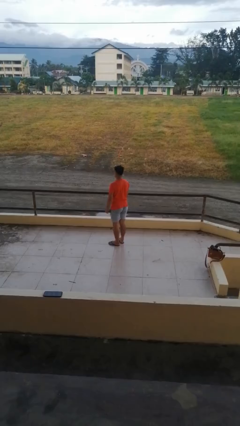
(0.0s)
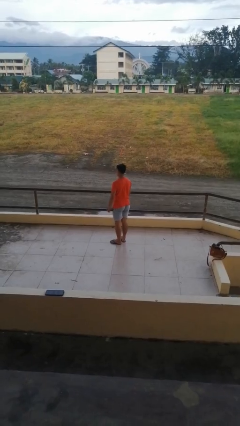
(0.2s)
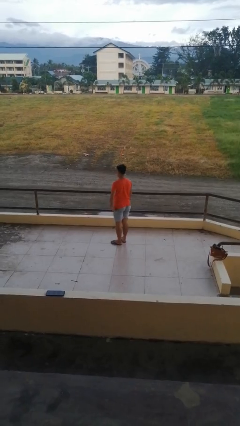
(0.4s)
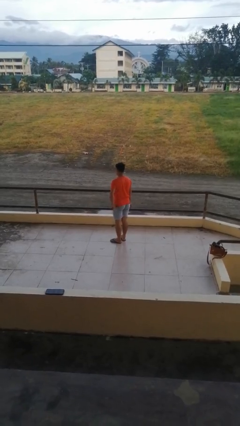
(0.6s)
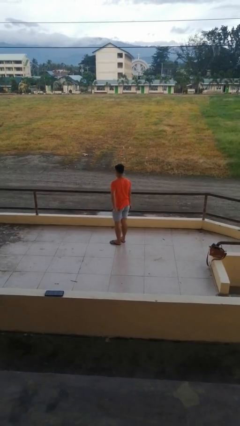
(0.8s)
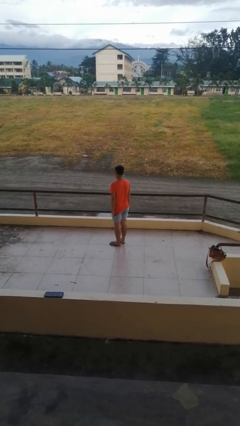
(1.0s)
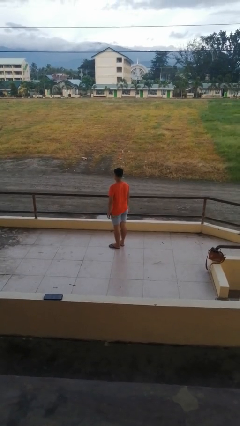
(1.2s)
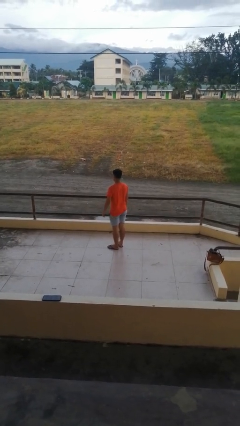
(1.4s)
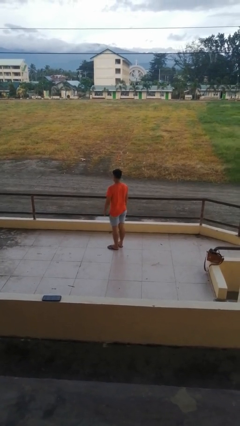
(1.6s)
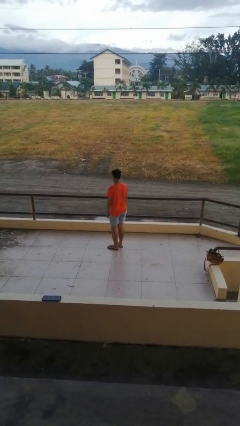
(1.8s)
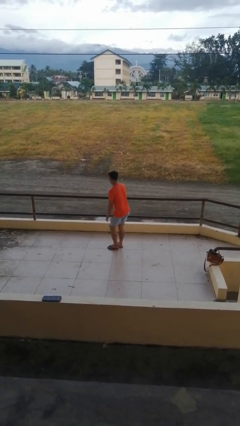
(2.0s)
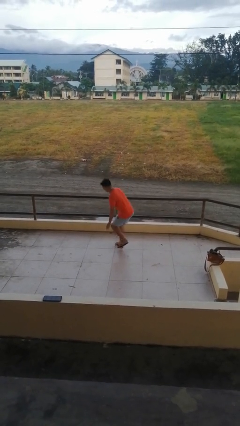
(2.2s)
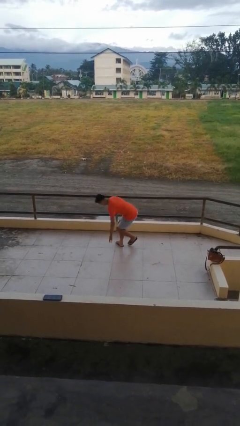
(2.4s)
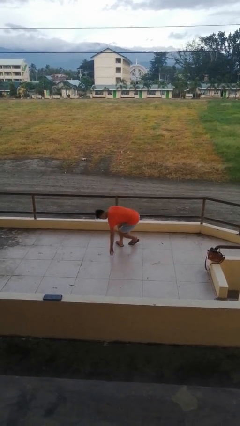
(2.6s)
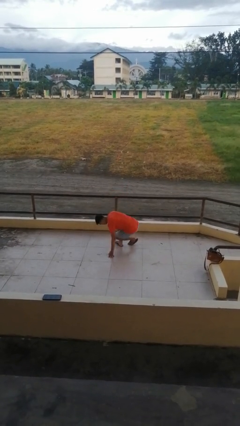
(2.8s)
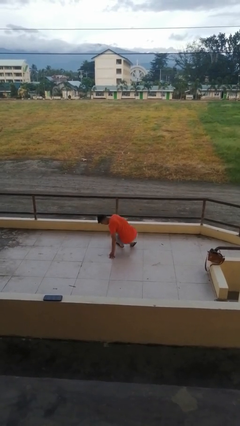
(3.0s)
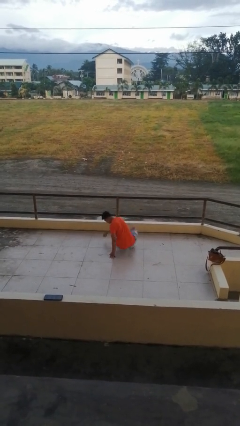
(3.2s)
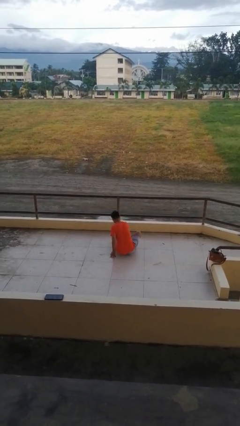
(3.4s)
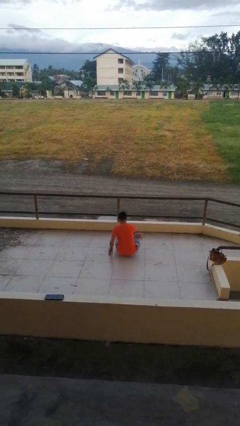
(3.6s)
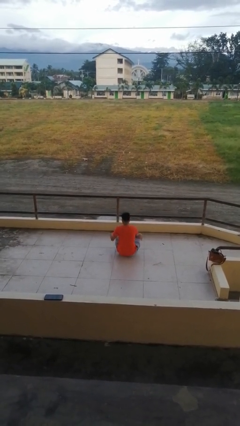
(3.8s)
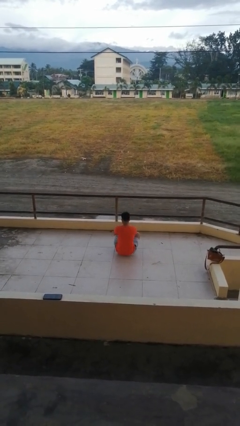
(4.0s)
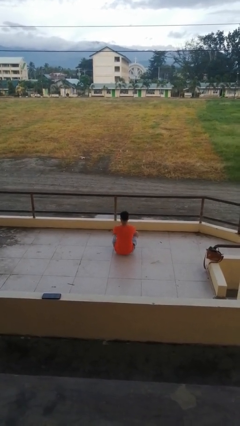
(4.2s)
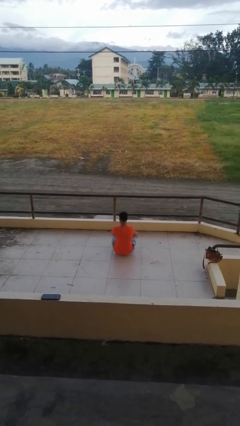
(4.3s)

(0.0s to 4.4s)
person sits crisscross

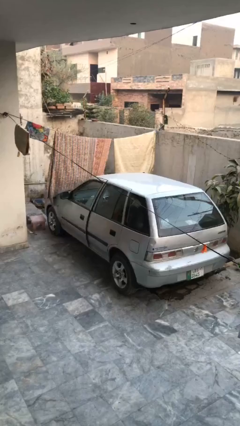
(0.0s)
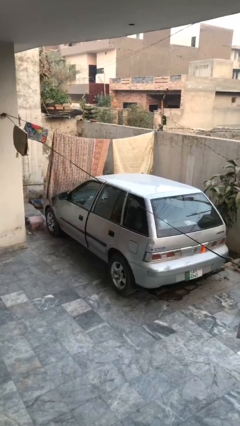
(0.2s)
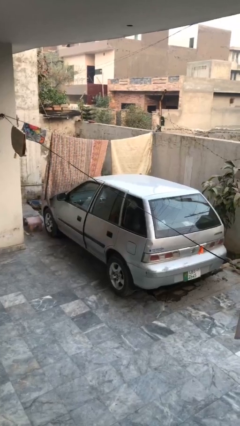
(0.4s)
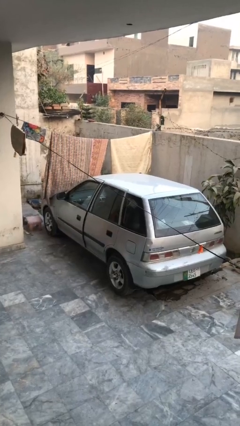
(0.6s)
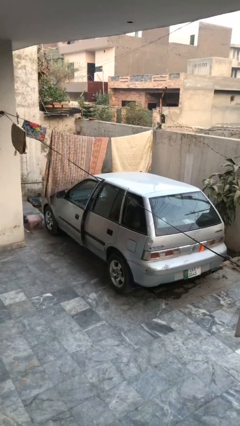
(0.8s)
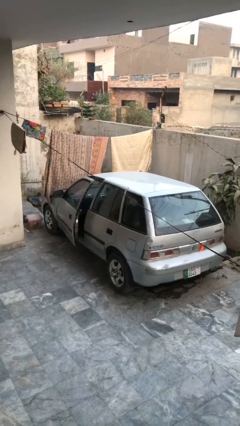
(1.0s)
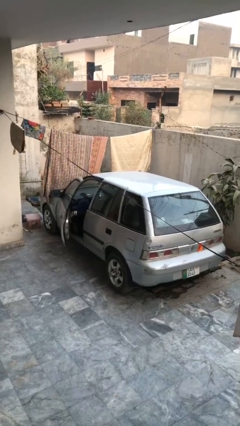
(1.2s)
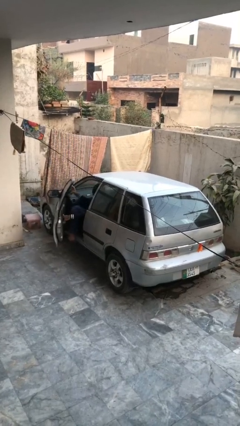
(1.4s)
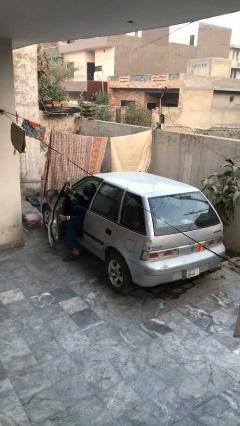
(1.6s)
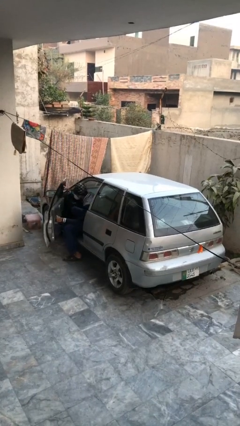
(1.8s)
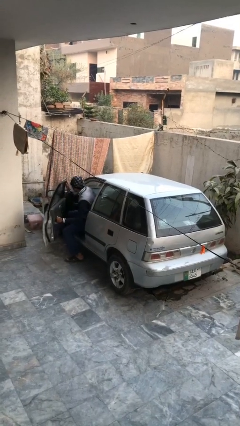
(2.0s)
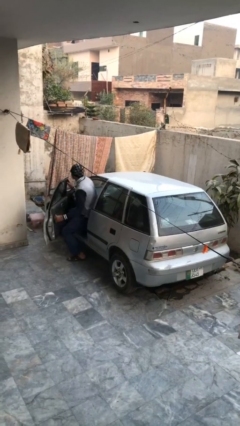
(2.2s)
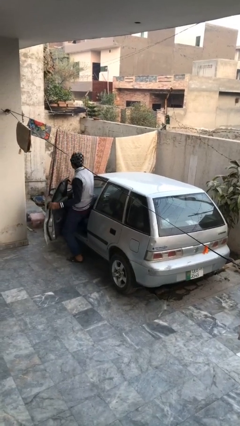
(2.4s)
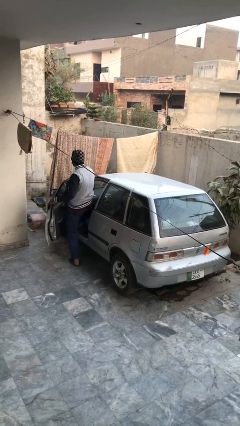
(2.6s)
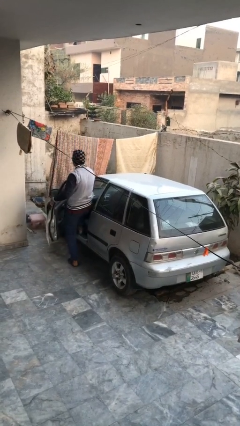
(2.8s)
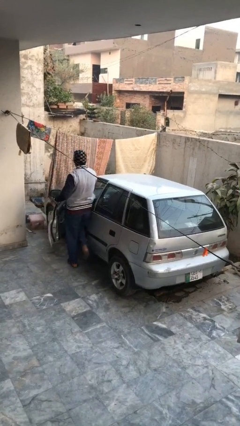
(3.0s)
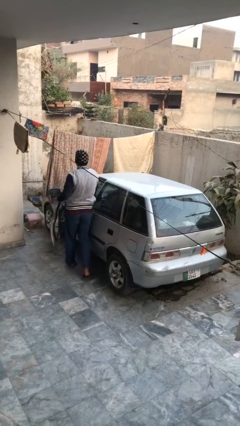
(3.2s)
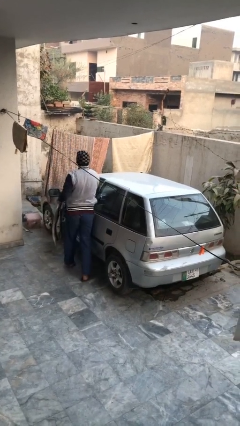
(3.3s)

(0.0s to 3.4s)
car drops off person

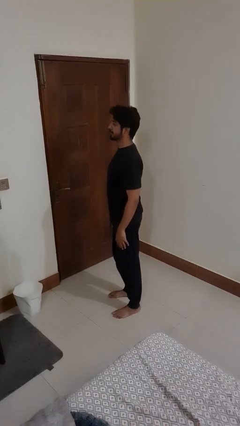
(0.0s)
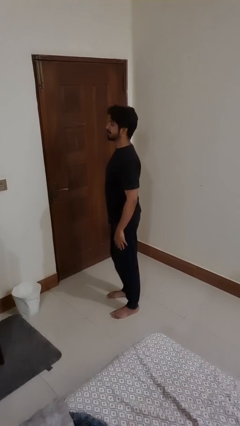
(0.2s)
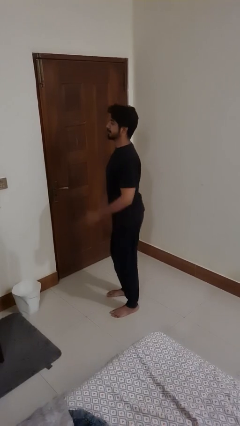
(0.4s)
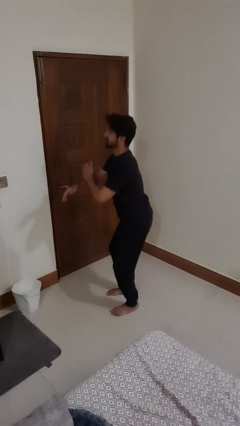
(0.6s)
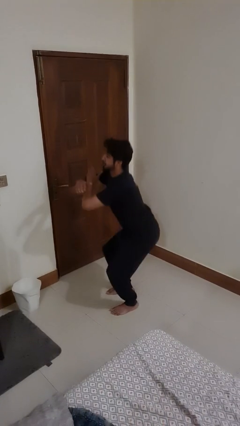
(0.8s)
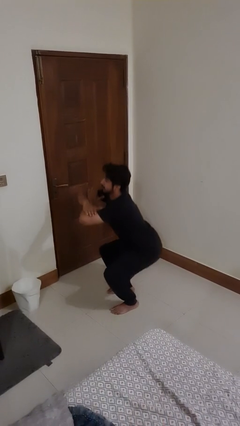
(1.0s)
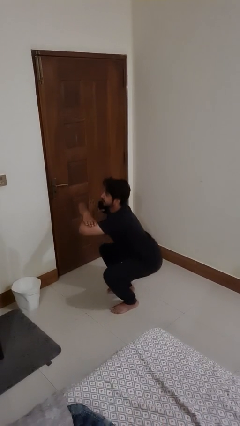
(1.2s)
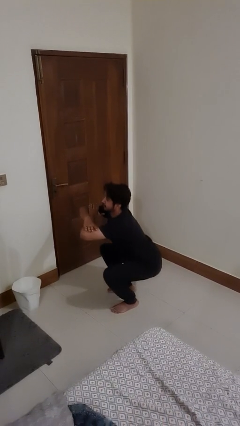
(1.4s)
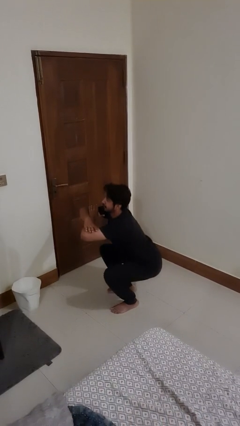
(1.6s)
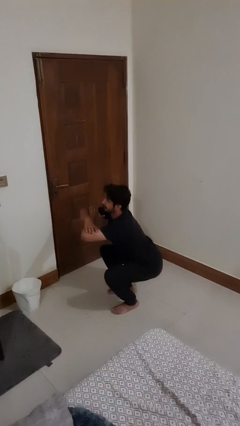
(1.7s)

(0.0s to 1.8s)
person squats

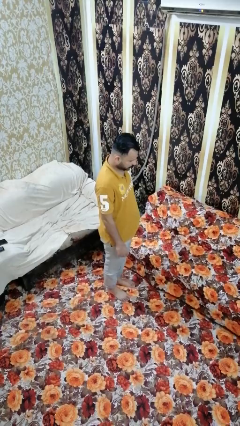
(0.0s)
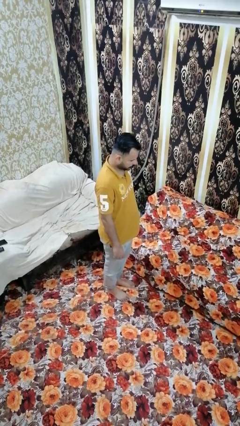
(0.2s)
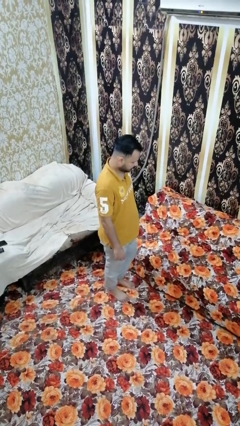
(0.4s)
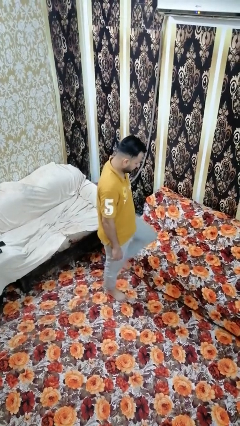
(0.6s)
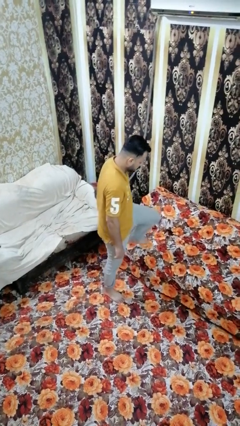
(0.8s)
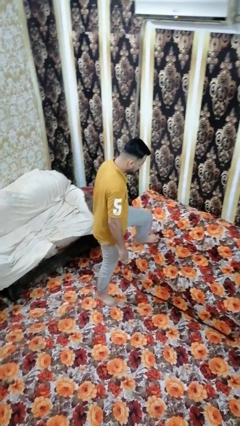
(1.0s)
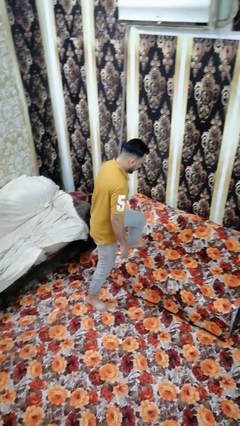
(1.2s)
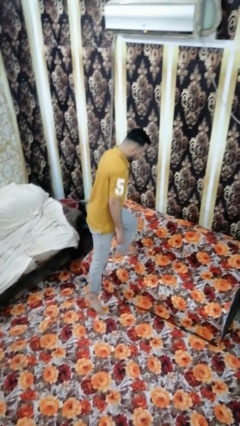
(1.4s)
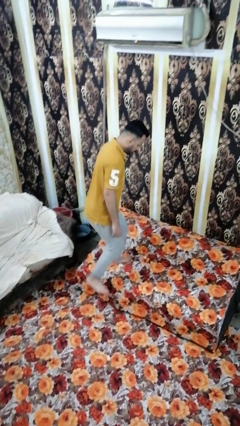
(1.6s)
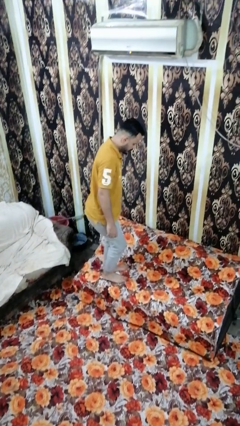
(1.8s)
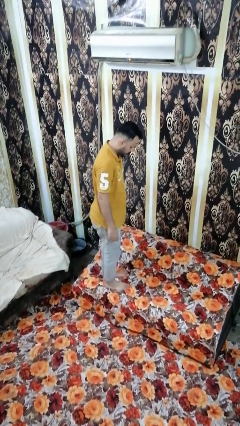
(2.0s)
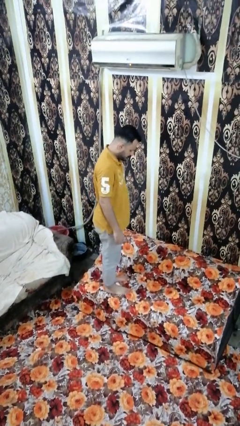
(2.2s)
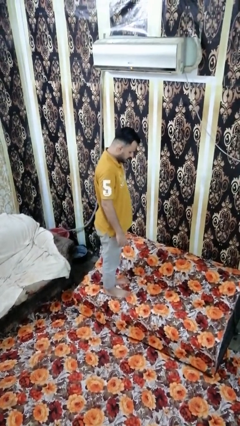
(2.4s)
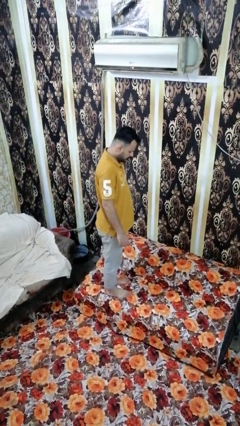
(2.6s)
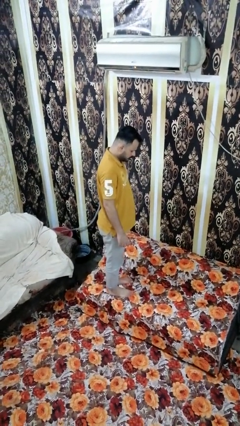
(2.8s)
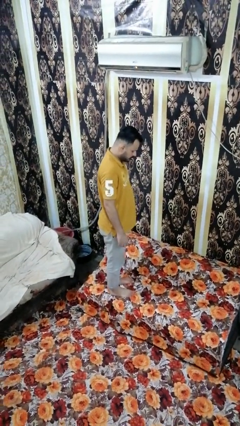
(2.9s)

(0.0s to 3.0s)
person climbs on couch

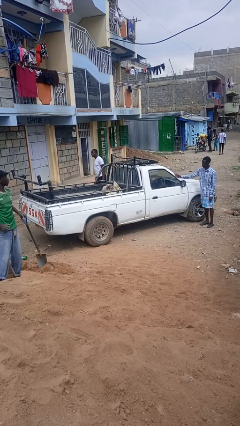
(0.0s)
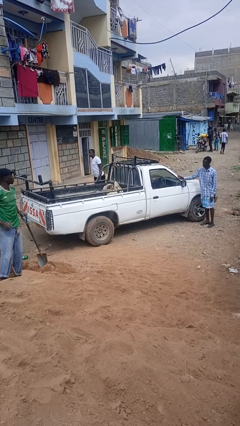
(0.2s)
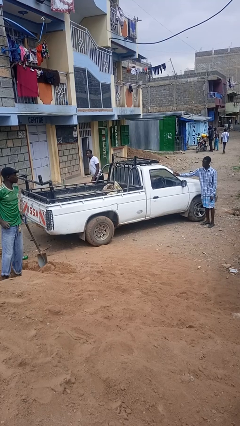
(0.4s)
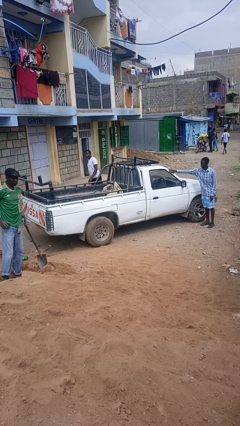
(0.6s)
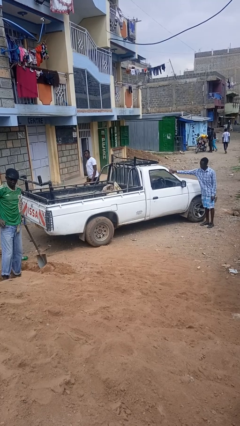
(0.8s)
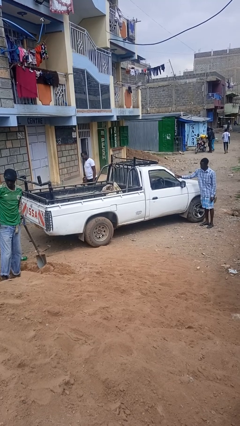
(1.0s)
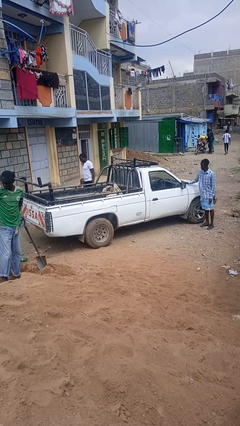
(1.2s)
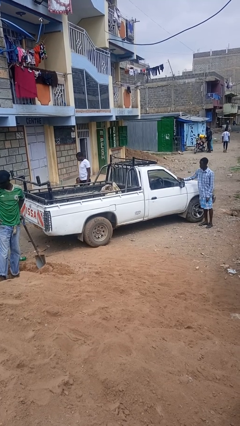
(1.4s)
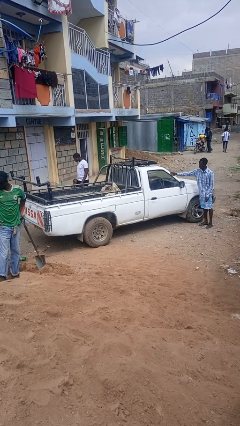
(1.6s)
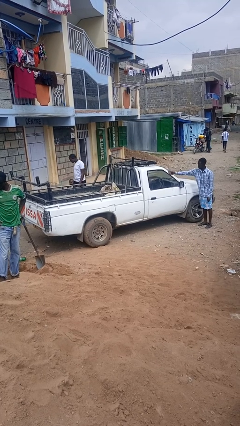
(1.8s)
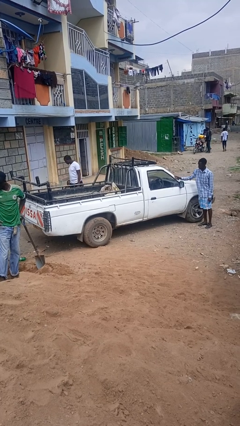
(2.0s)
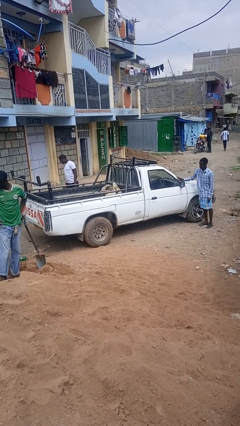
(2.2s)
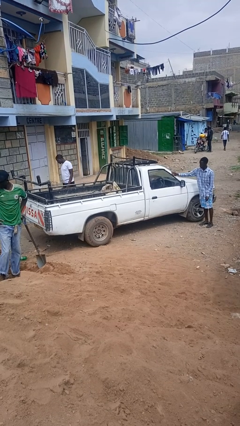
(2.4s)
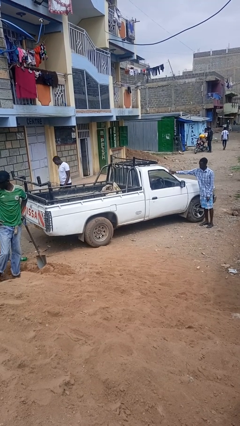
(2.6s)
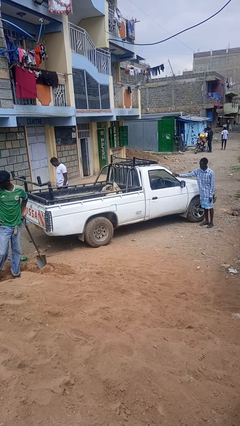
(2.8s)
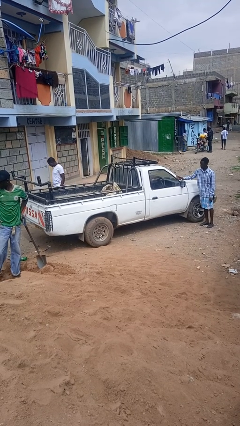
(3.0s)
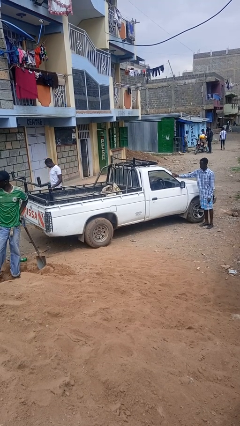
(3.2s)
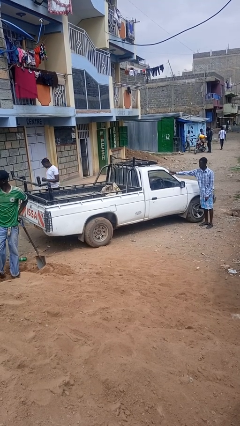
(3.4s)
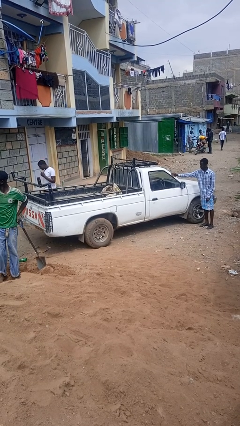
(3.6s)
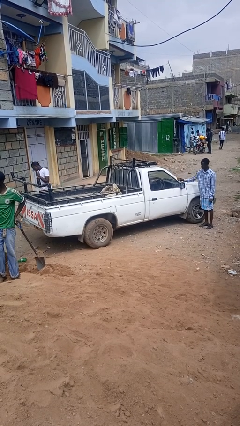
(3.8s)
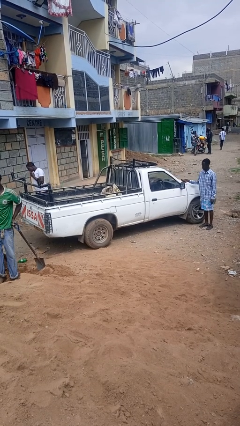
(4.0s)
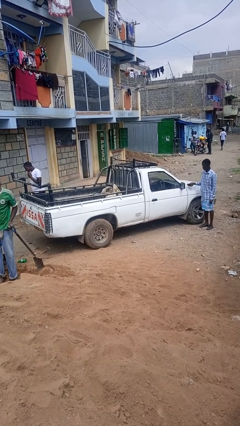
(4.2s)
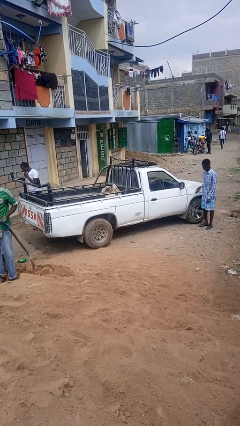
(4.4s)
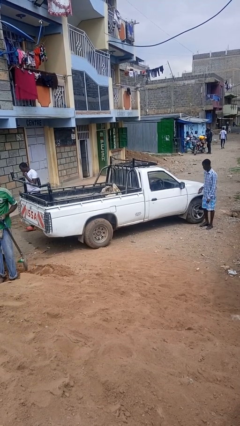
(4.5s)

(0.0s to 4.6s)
person polishes car with rag

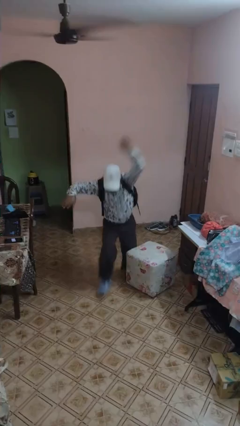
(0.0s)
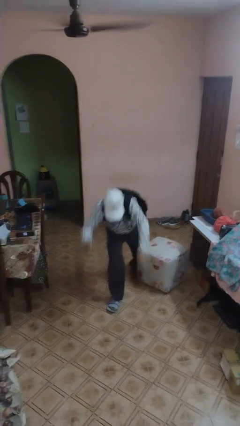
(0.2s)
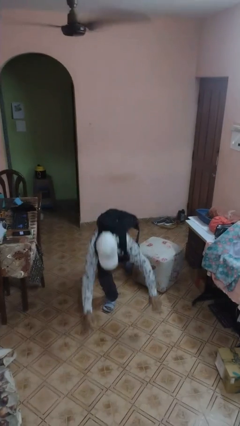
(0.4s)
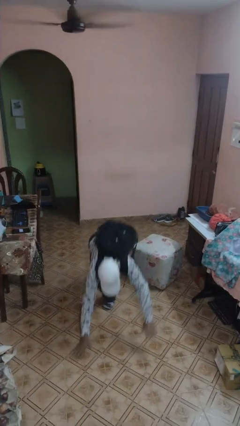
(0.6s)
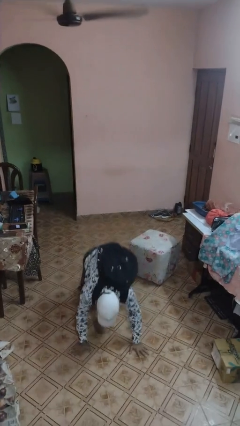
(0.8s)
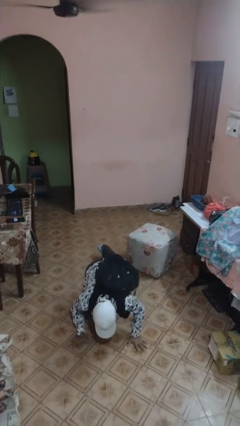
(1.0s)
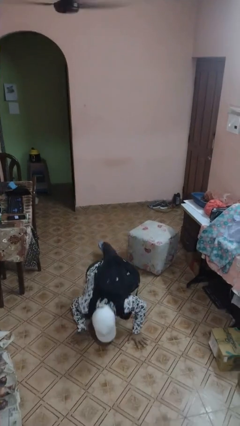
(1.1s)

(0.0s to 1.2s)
person trips on object on floor
